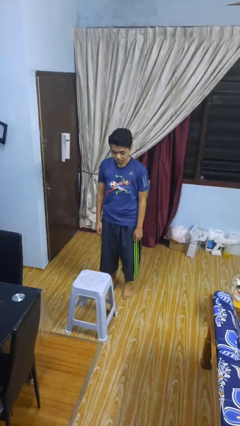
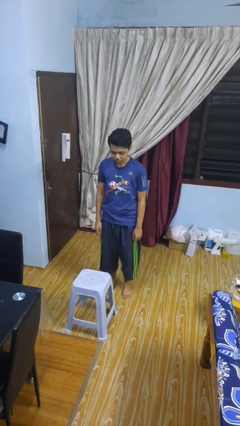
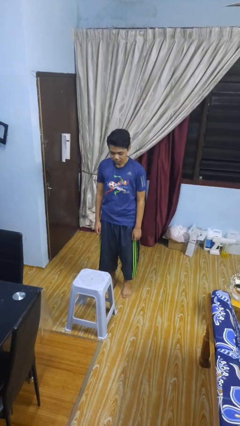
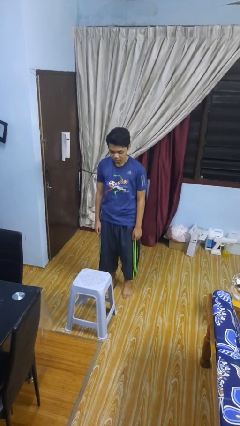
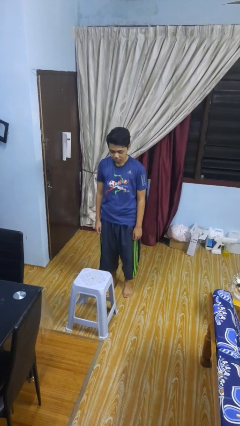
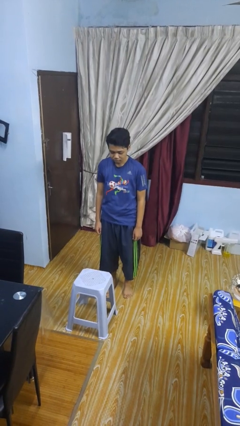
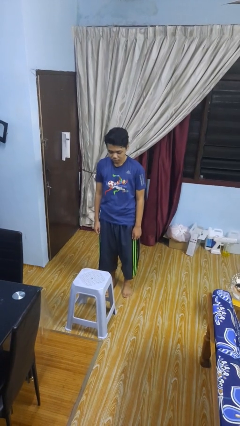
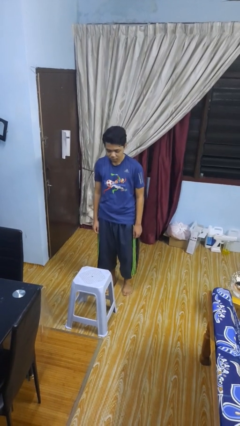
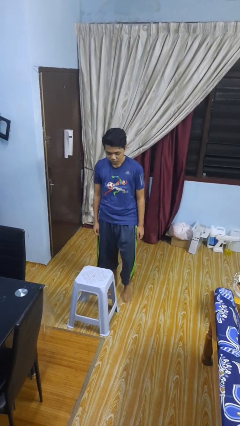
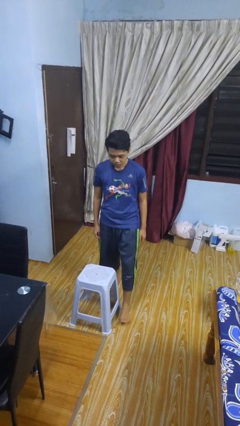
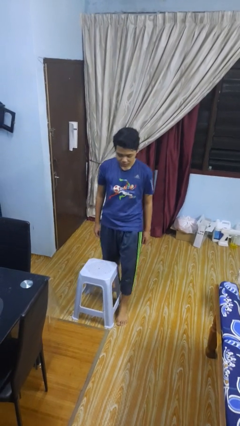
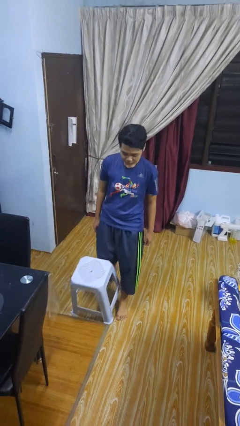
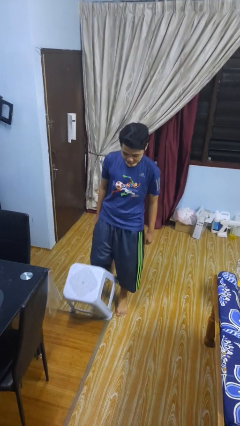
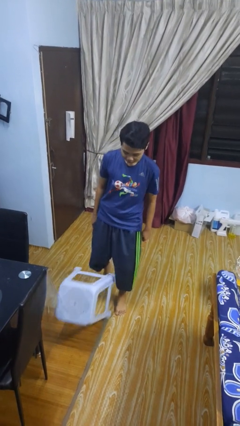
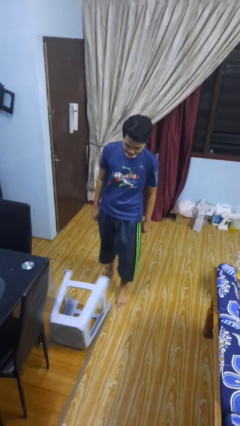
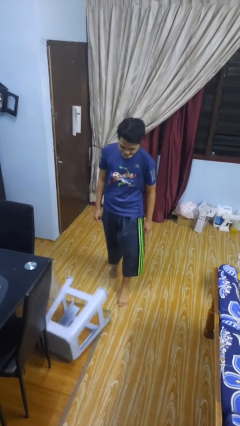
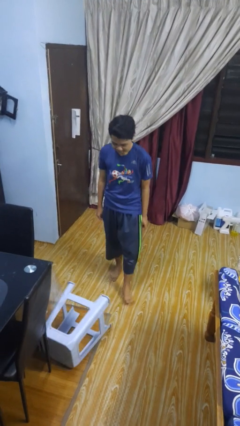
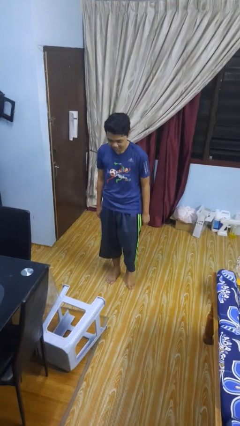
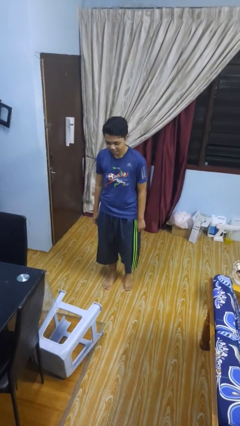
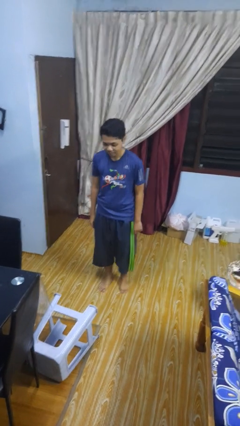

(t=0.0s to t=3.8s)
person knocks over furniture

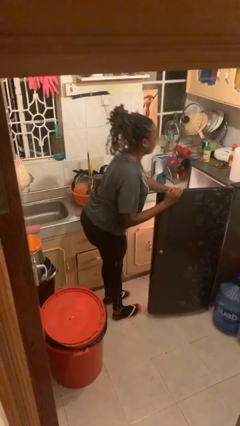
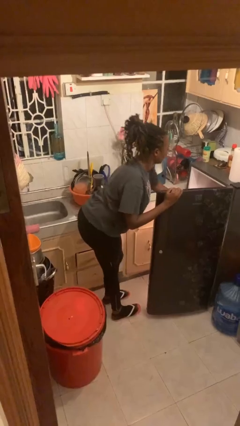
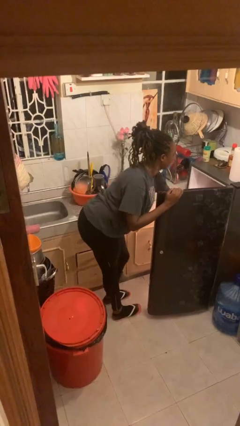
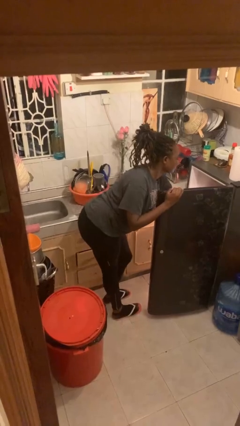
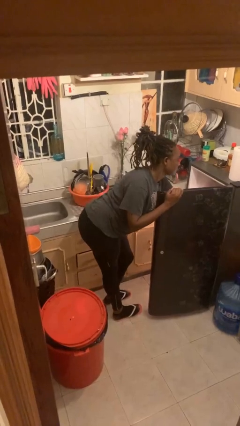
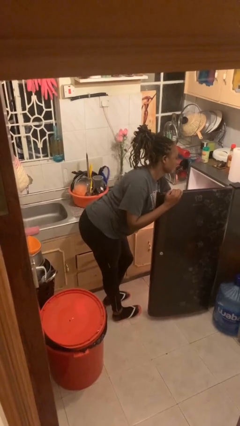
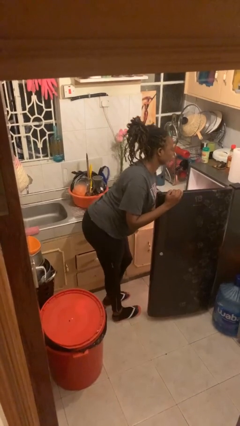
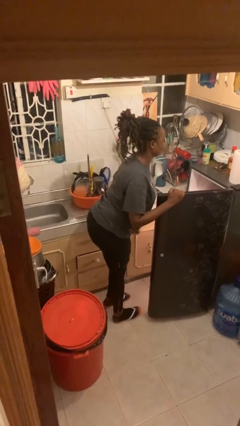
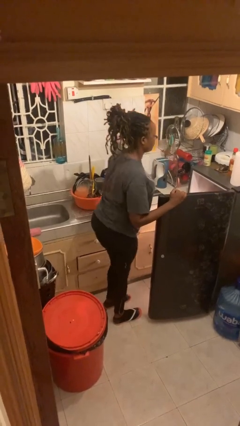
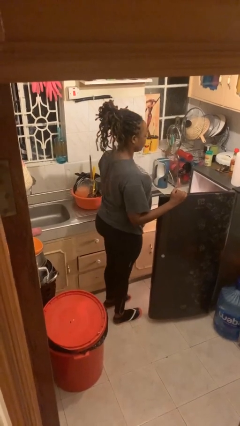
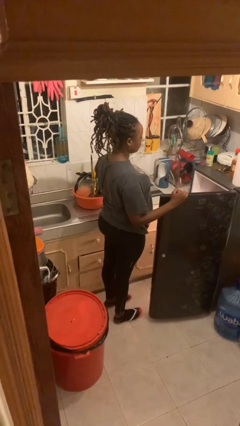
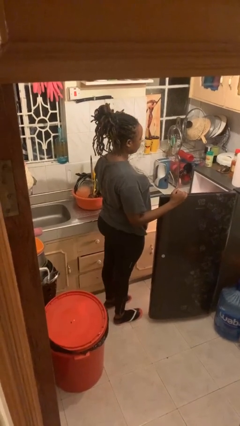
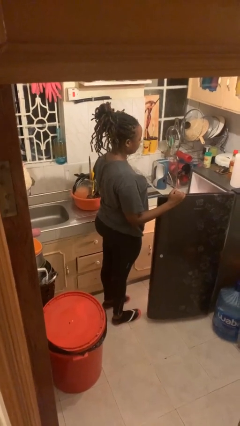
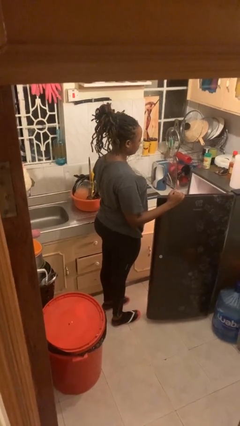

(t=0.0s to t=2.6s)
person puts object into refrigerator

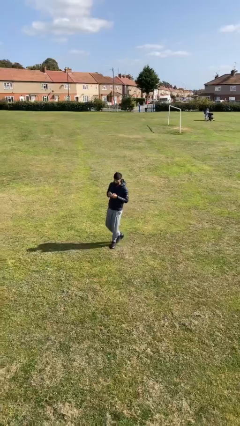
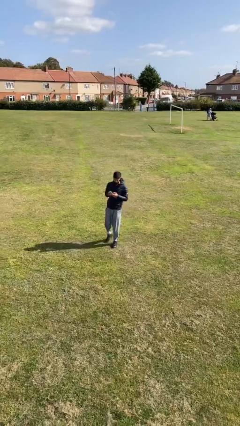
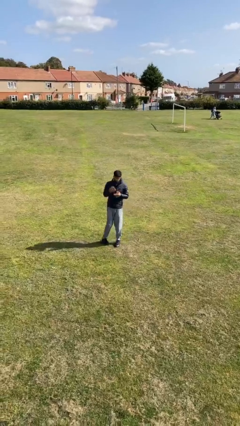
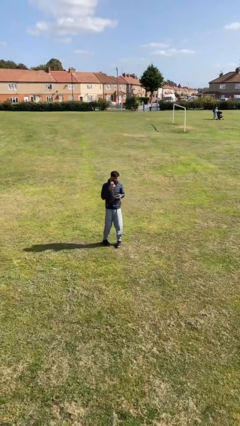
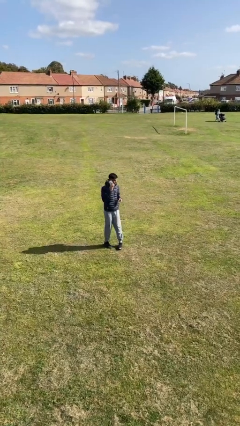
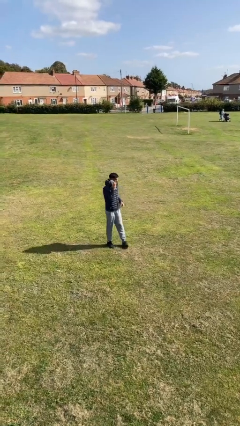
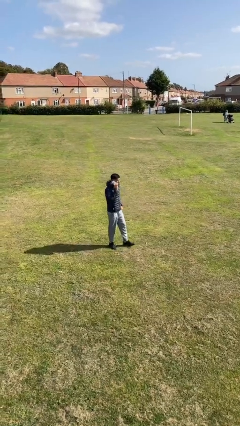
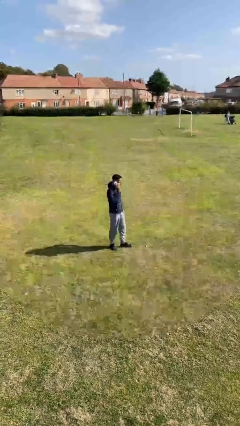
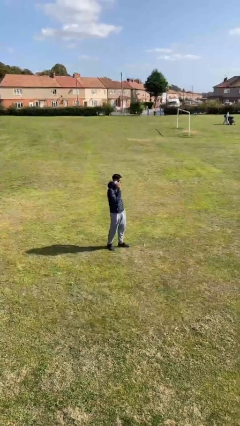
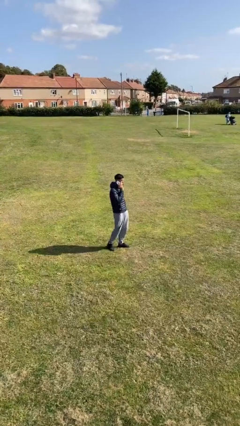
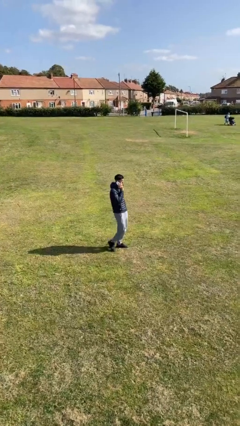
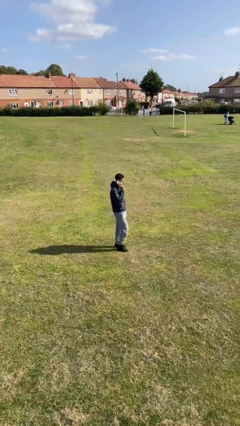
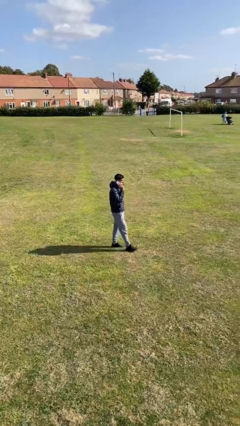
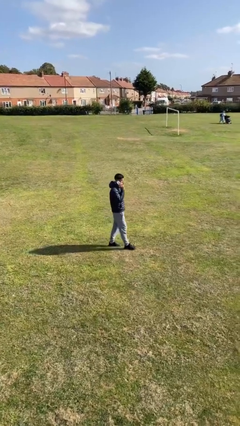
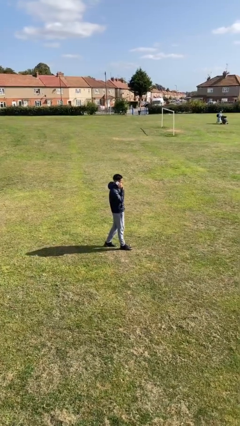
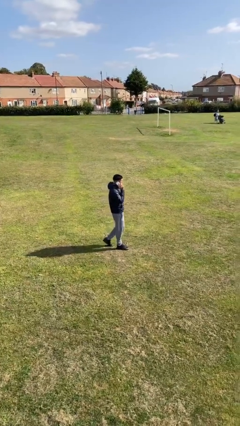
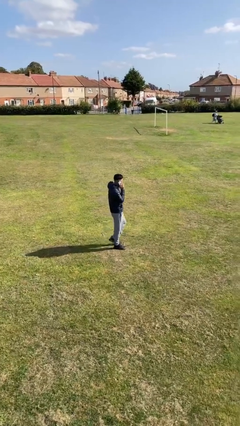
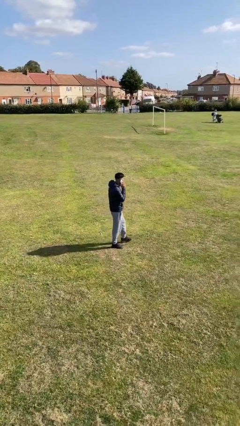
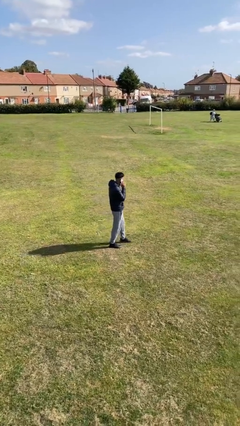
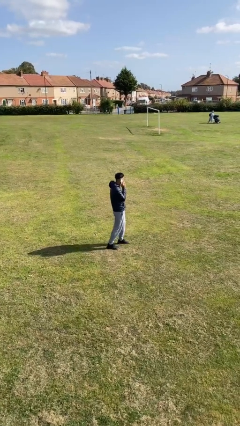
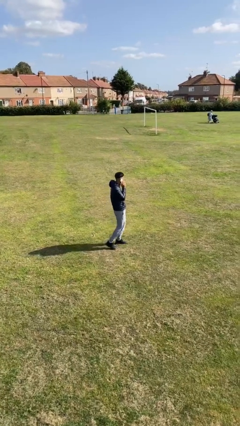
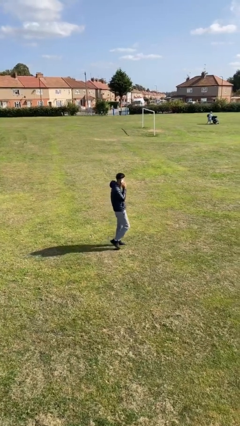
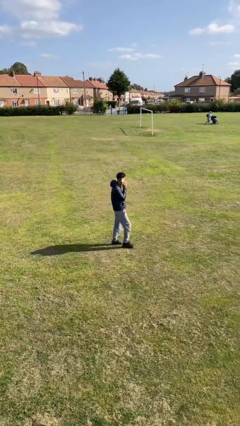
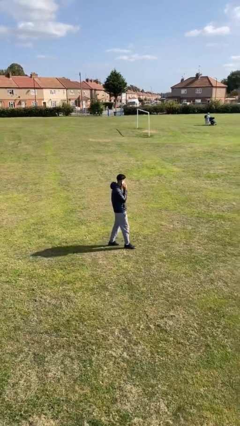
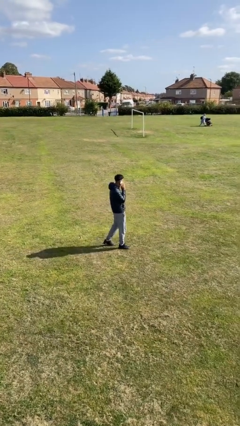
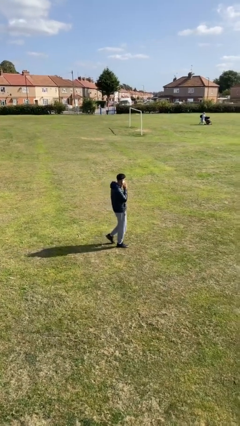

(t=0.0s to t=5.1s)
person talks on phone

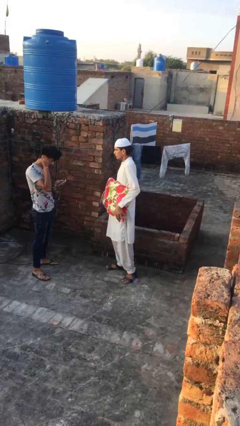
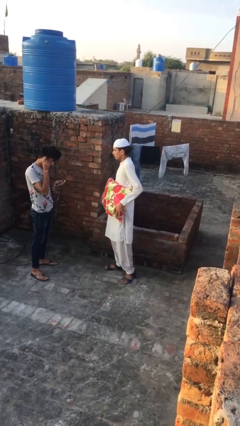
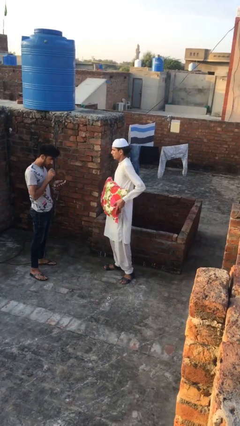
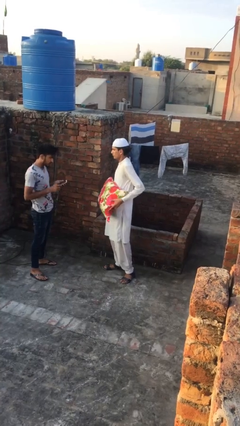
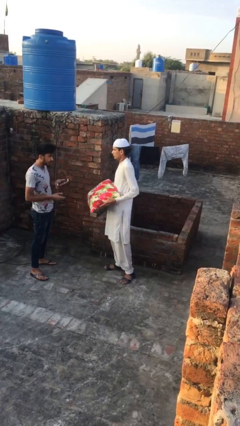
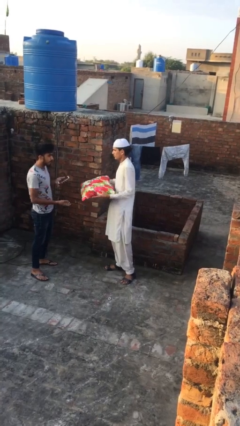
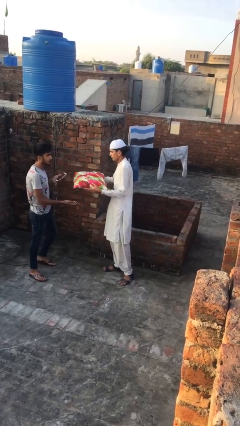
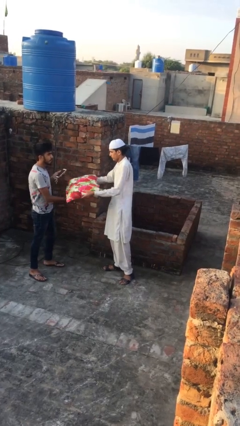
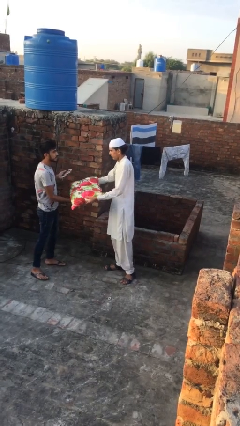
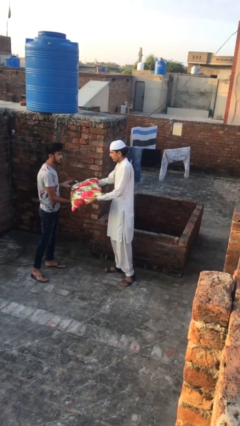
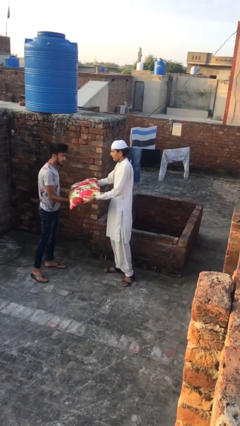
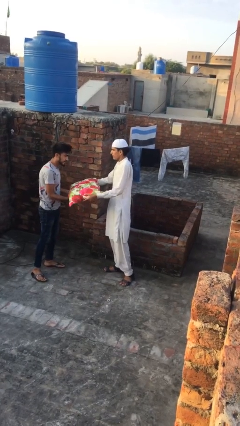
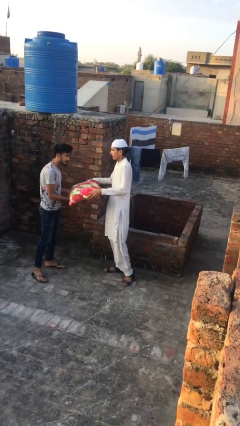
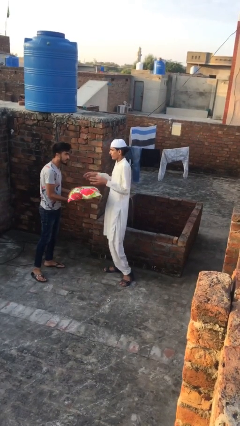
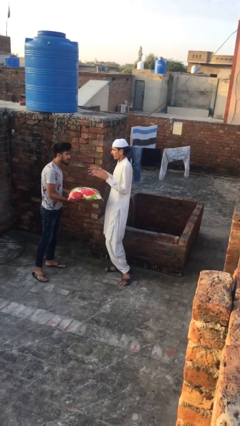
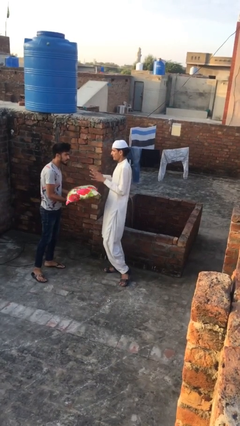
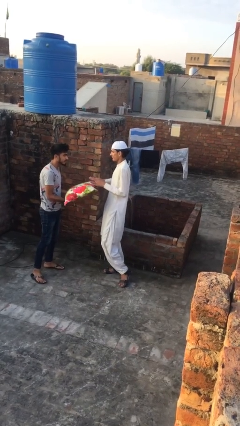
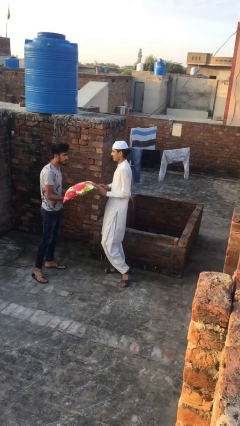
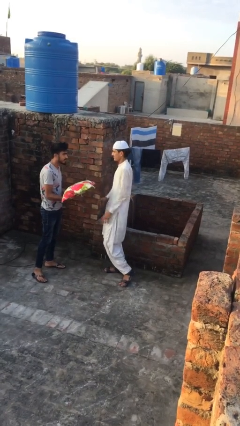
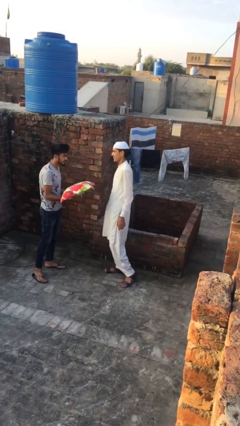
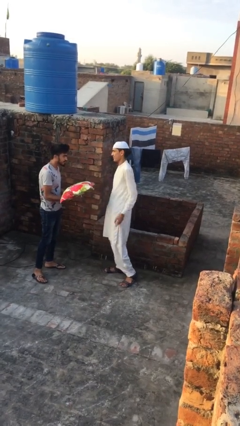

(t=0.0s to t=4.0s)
person transfers object to person

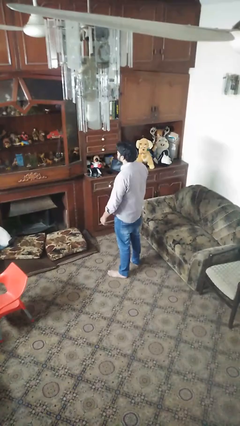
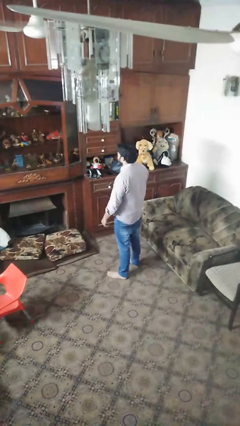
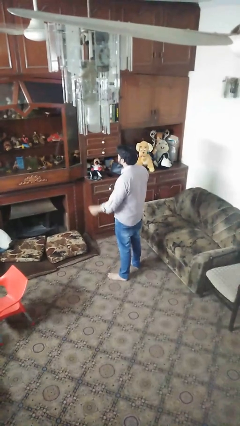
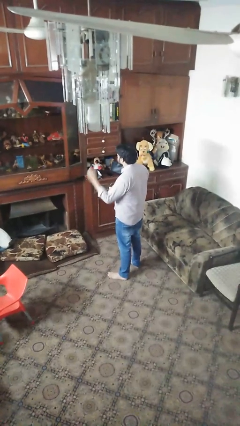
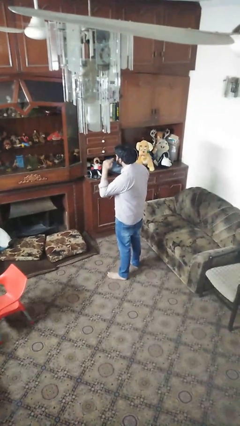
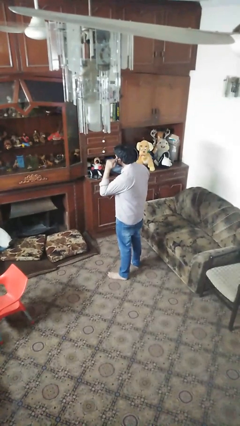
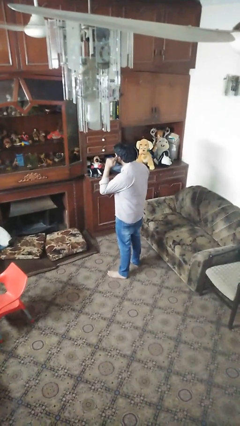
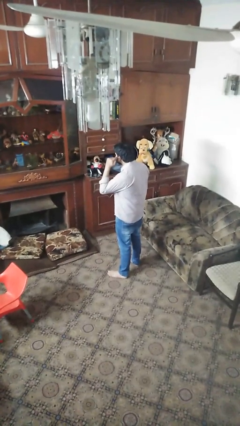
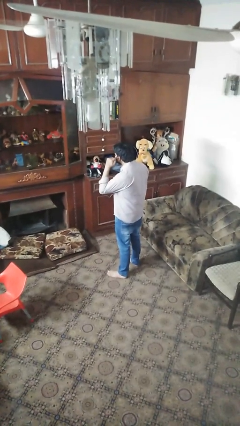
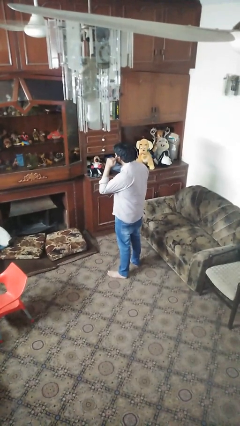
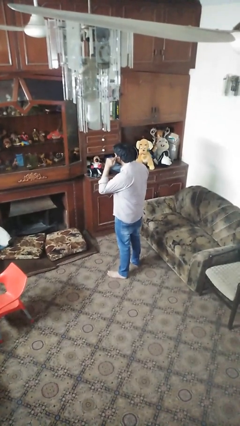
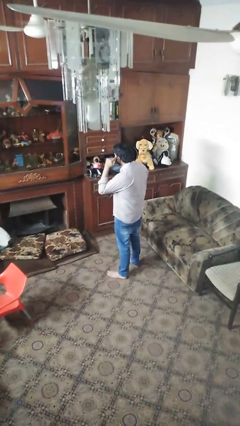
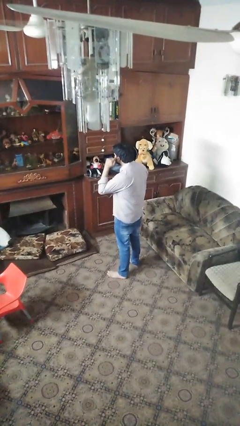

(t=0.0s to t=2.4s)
person gestures listen closely
